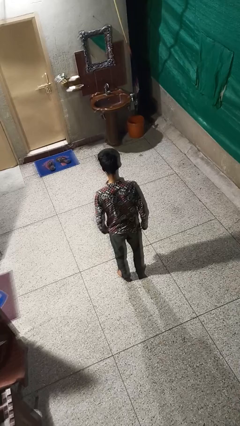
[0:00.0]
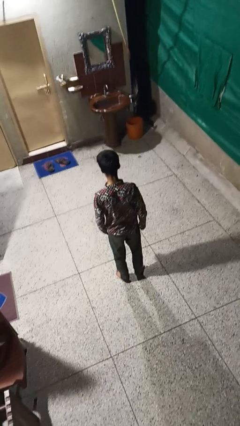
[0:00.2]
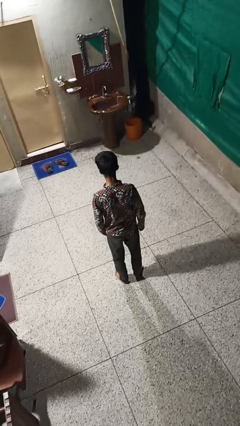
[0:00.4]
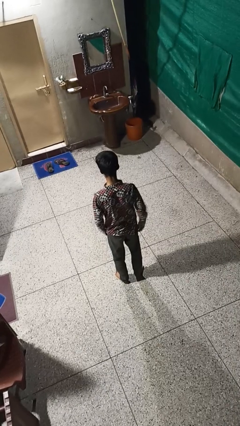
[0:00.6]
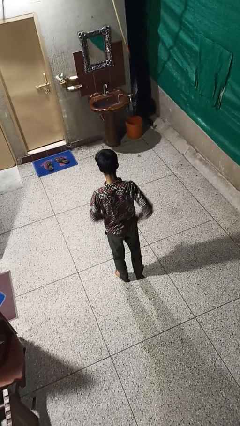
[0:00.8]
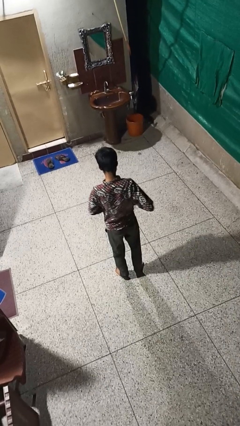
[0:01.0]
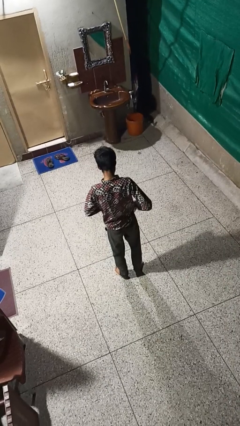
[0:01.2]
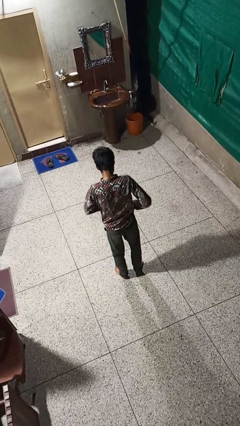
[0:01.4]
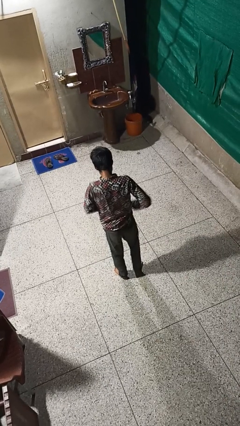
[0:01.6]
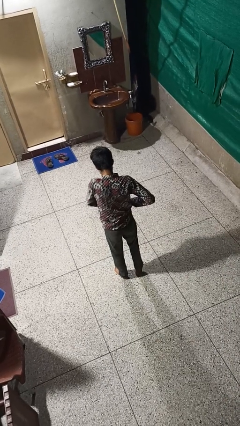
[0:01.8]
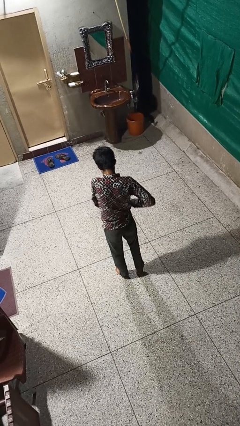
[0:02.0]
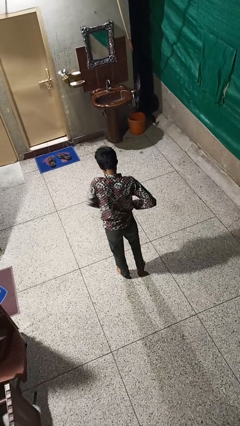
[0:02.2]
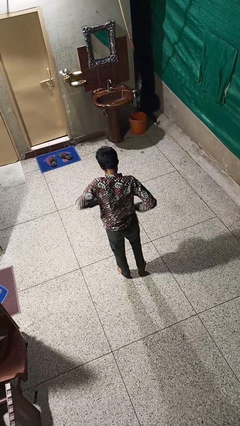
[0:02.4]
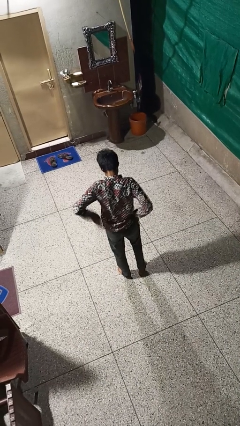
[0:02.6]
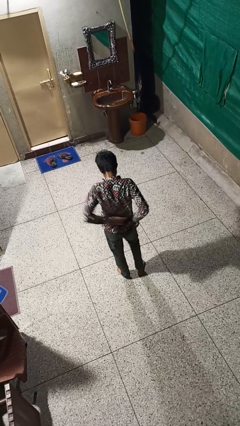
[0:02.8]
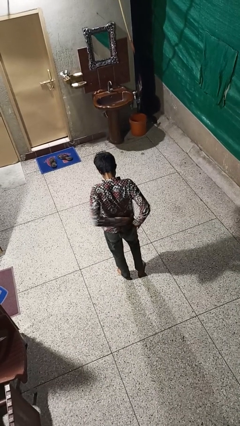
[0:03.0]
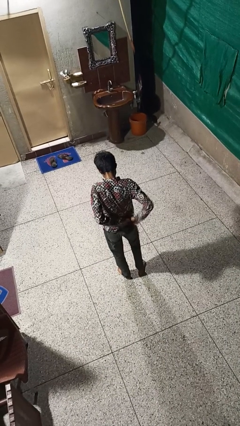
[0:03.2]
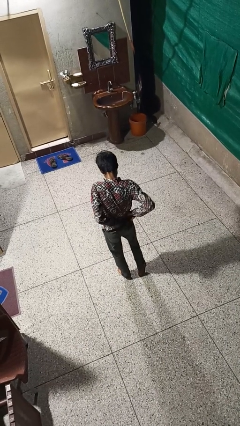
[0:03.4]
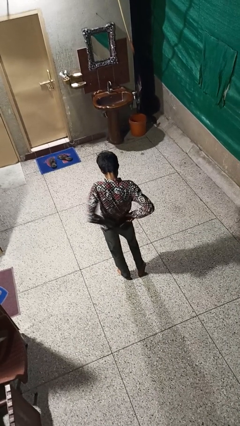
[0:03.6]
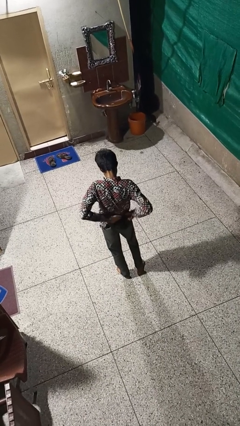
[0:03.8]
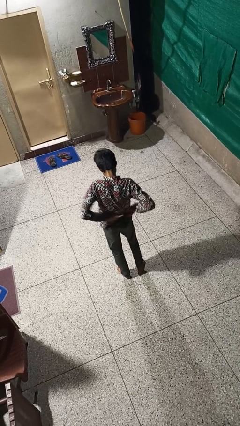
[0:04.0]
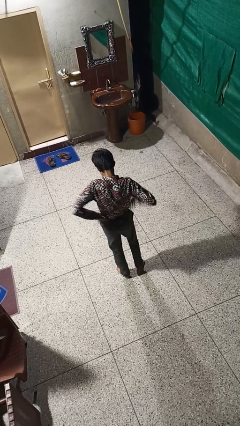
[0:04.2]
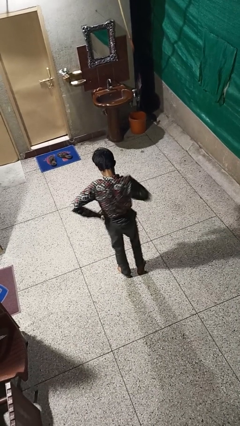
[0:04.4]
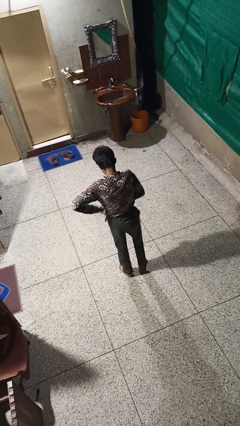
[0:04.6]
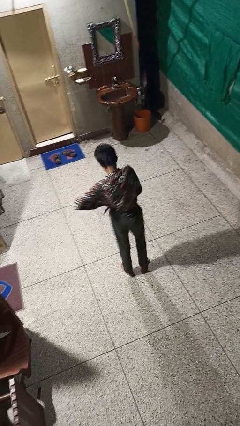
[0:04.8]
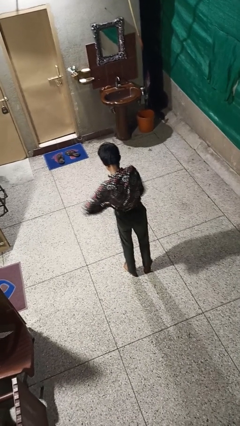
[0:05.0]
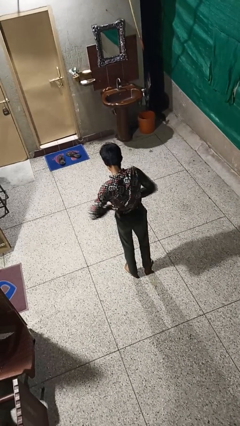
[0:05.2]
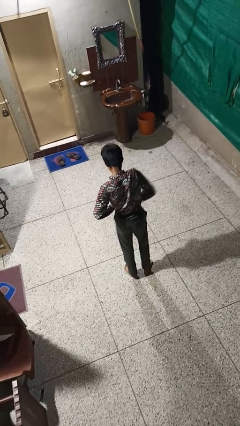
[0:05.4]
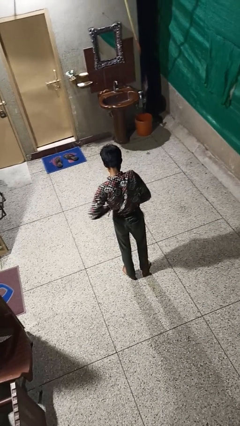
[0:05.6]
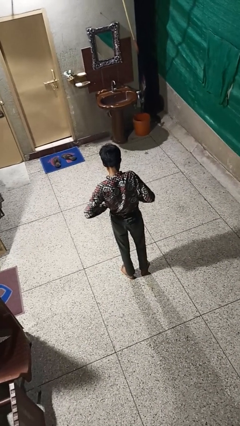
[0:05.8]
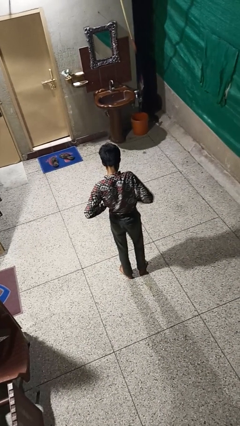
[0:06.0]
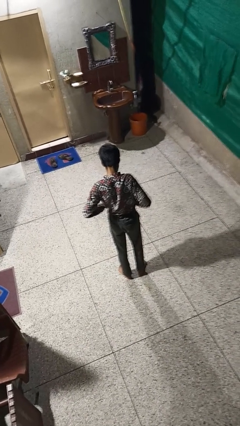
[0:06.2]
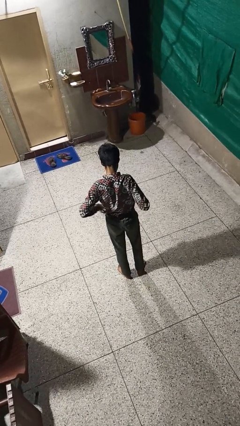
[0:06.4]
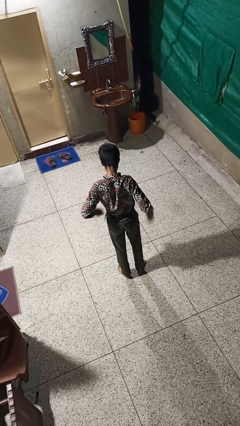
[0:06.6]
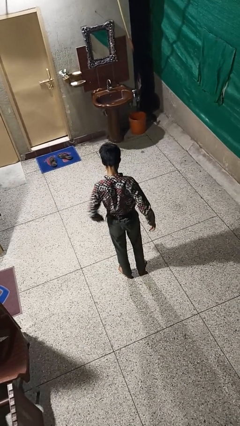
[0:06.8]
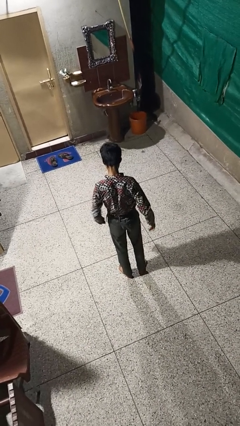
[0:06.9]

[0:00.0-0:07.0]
person tucks in shirt

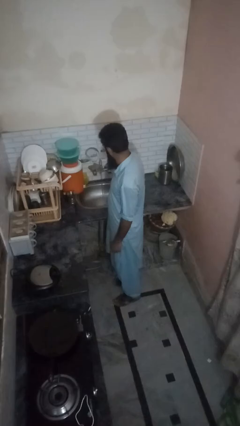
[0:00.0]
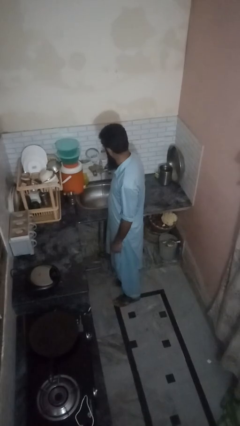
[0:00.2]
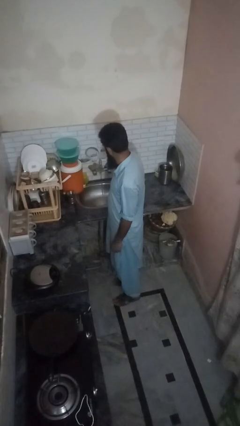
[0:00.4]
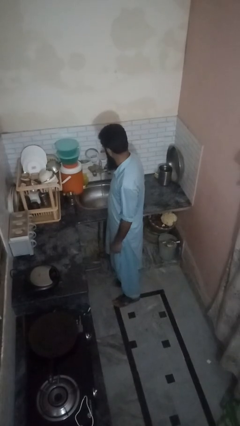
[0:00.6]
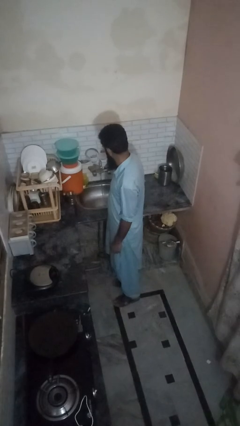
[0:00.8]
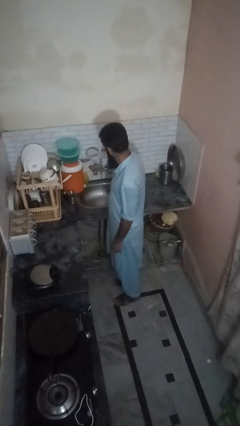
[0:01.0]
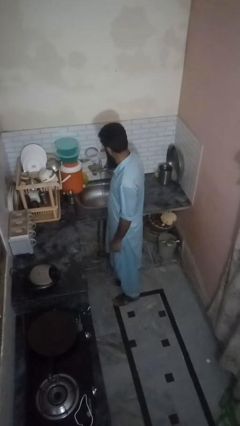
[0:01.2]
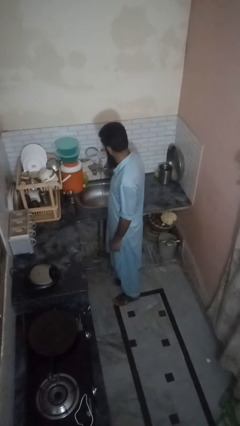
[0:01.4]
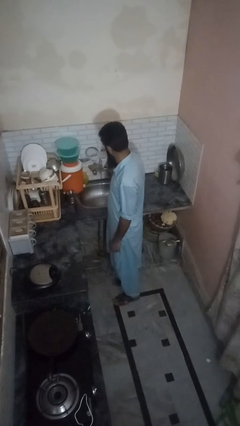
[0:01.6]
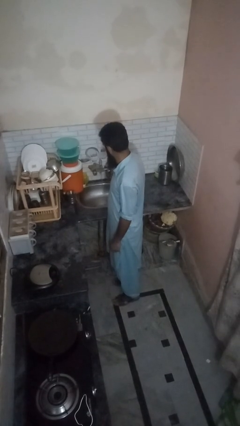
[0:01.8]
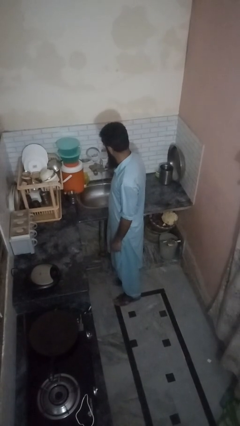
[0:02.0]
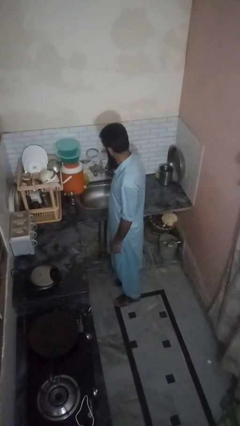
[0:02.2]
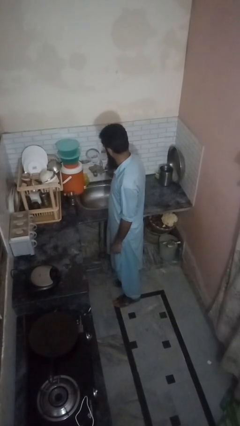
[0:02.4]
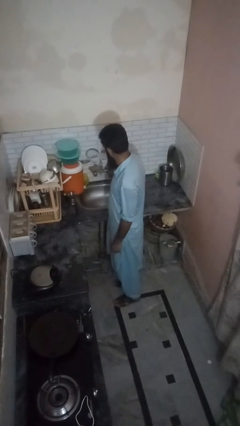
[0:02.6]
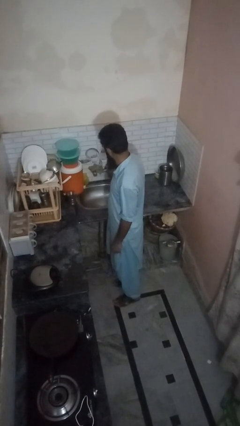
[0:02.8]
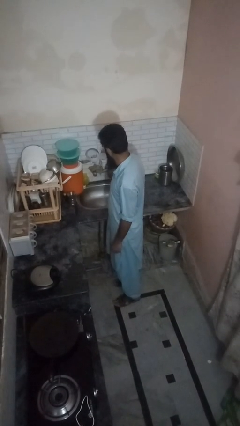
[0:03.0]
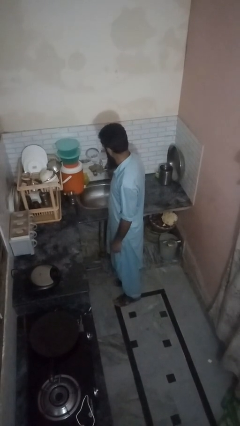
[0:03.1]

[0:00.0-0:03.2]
person turns off faucet

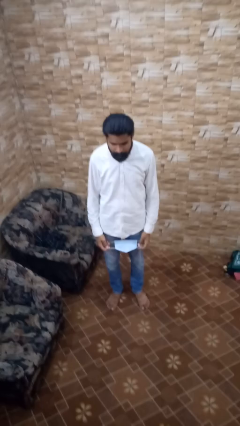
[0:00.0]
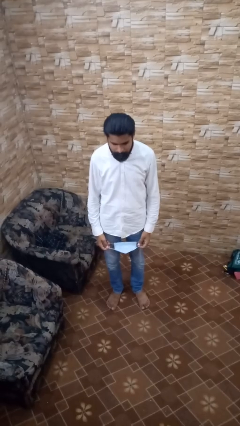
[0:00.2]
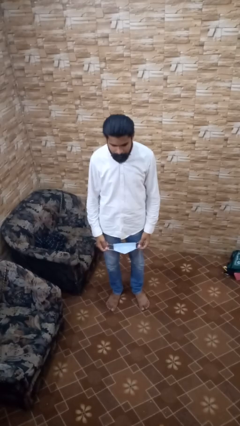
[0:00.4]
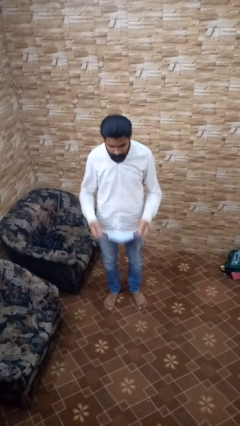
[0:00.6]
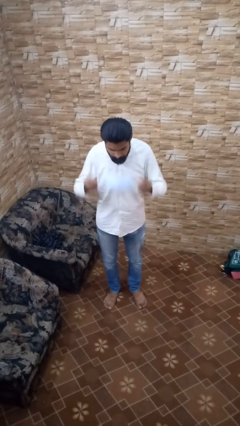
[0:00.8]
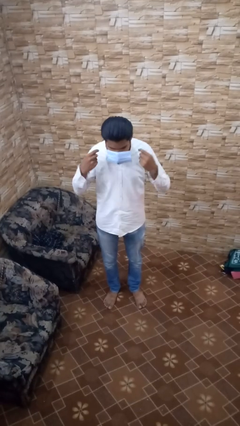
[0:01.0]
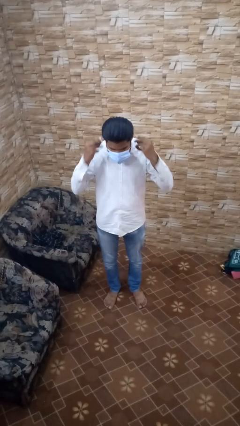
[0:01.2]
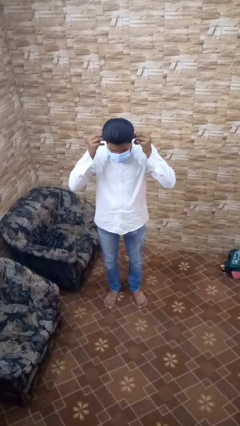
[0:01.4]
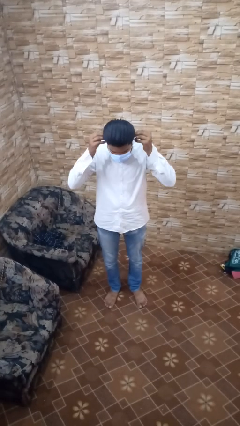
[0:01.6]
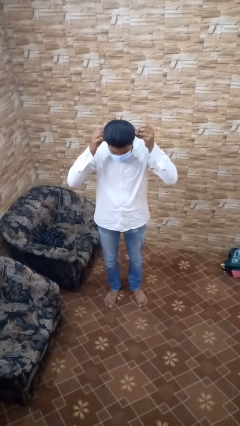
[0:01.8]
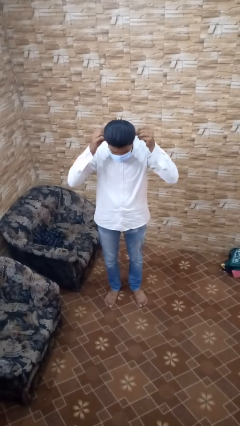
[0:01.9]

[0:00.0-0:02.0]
person puts on facemask

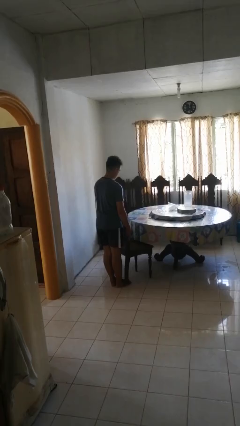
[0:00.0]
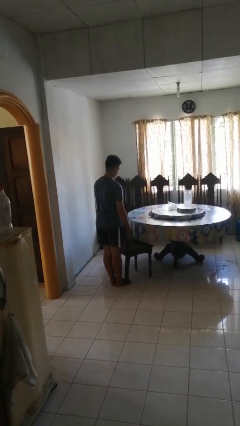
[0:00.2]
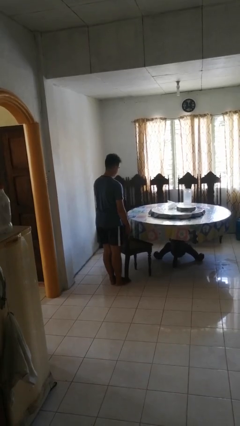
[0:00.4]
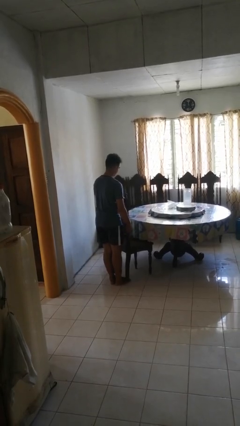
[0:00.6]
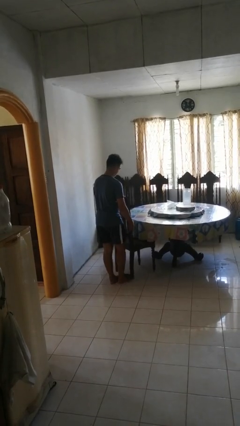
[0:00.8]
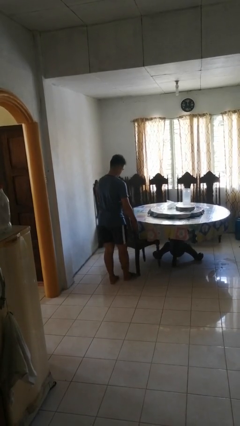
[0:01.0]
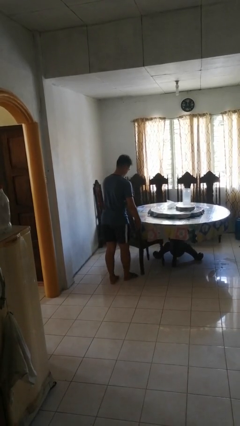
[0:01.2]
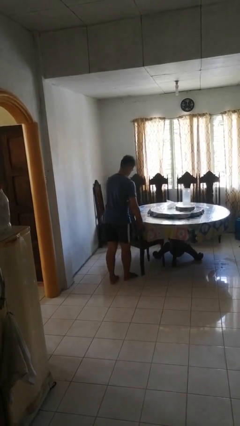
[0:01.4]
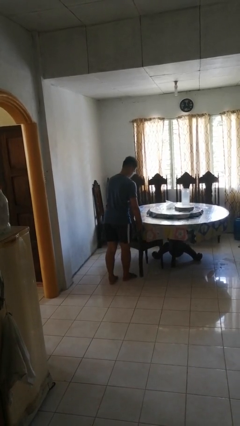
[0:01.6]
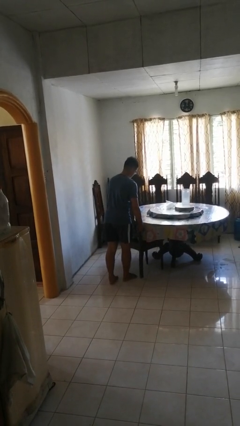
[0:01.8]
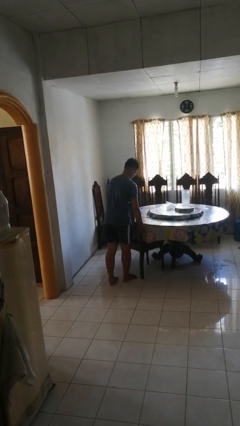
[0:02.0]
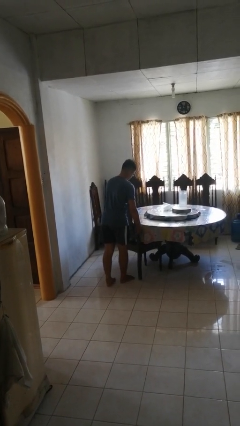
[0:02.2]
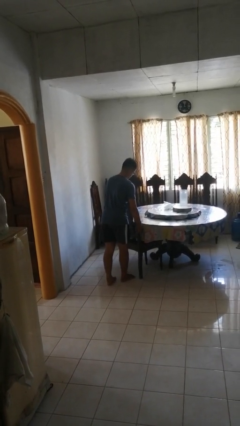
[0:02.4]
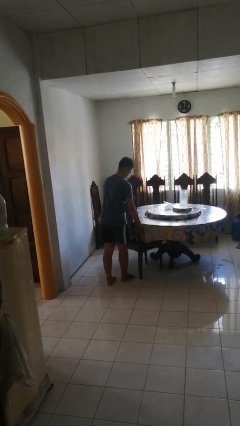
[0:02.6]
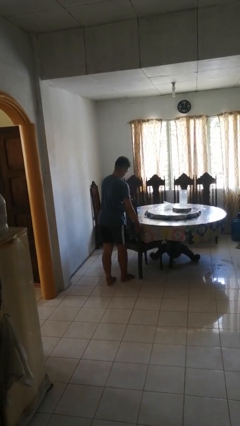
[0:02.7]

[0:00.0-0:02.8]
person pushes in chair

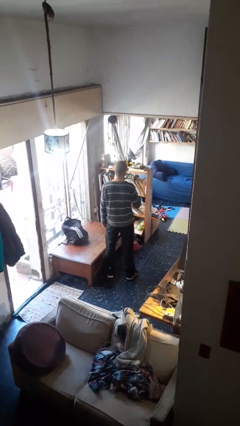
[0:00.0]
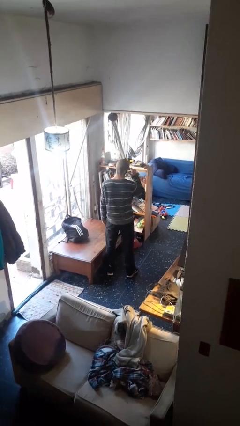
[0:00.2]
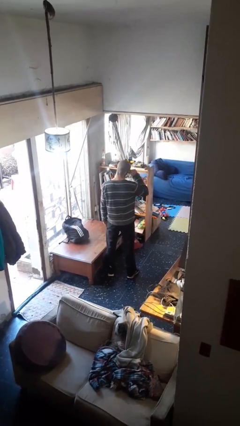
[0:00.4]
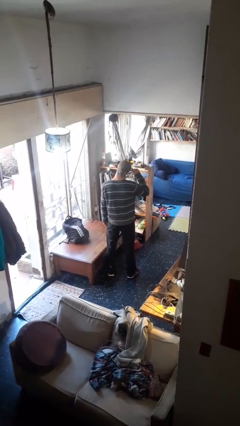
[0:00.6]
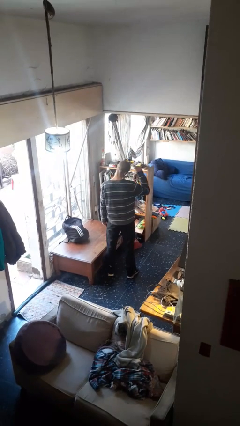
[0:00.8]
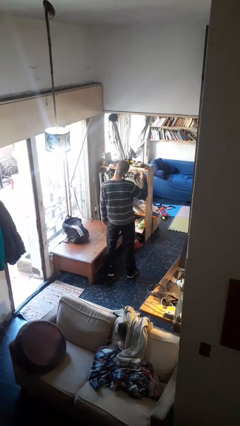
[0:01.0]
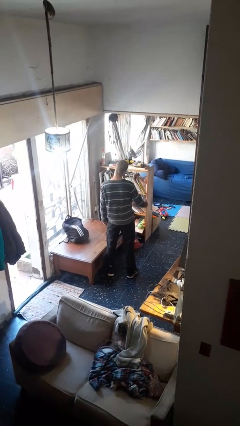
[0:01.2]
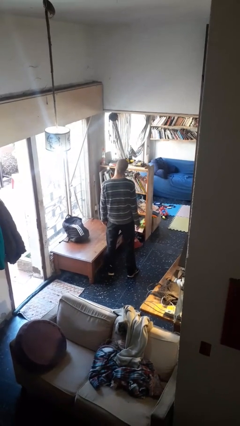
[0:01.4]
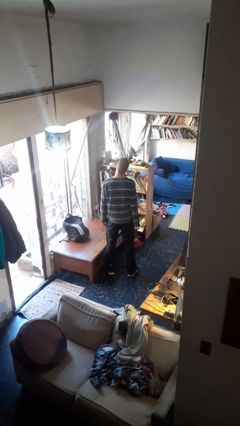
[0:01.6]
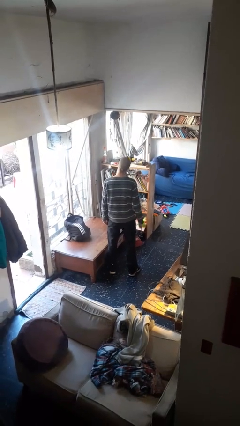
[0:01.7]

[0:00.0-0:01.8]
person takes off sunglasses

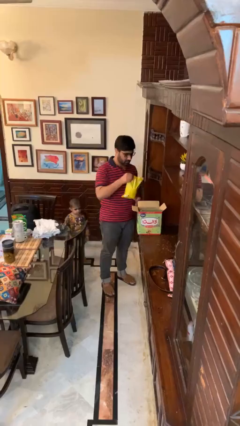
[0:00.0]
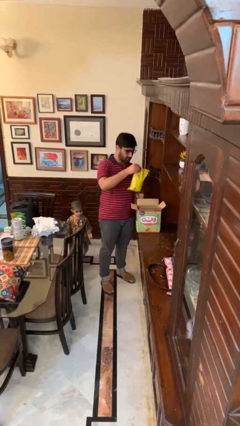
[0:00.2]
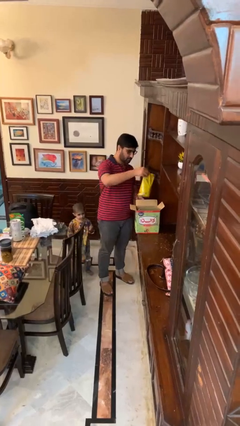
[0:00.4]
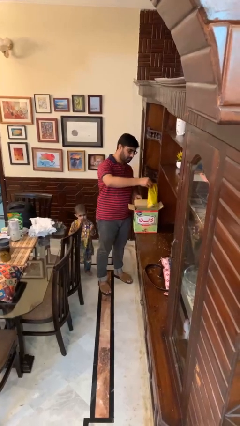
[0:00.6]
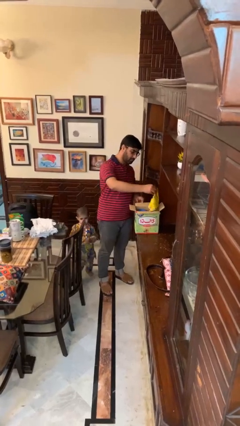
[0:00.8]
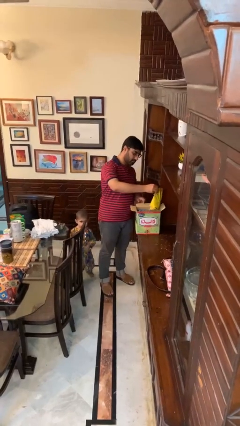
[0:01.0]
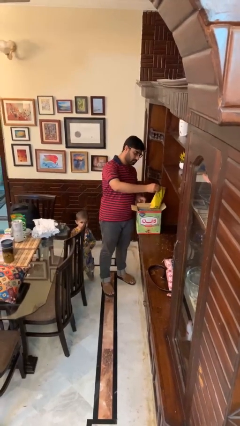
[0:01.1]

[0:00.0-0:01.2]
person puts object into box
